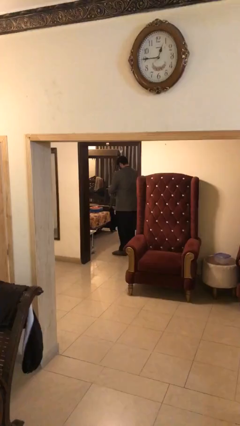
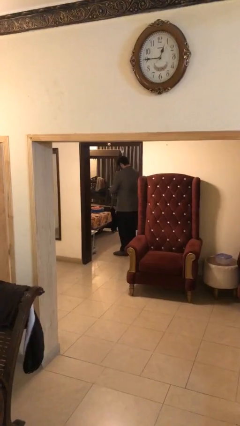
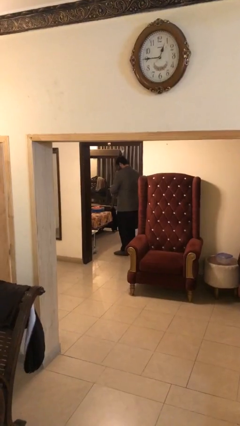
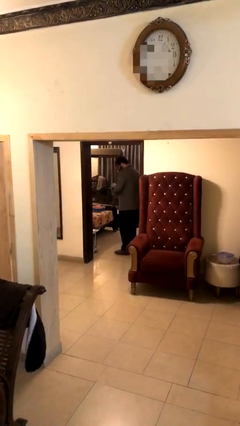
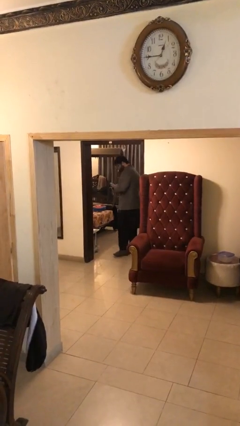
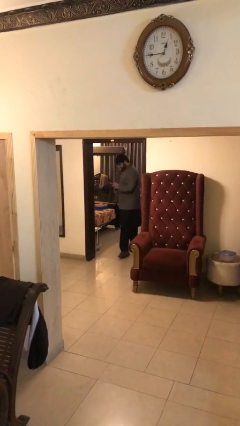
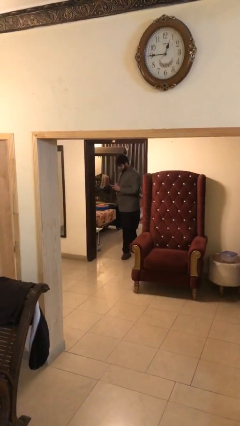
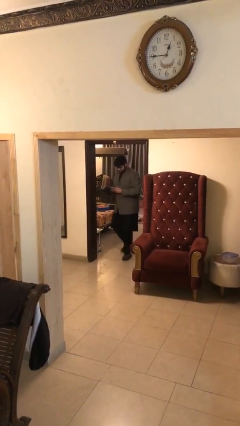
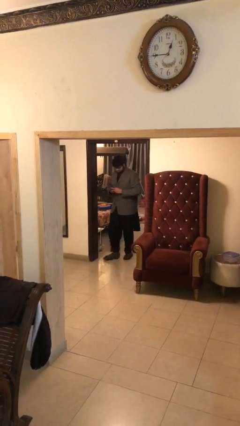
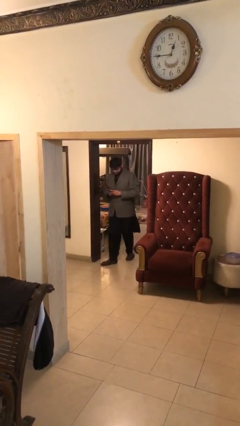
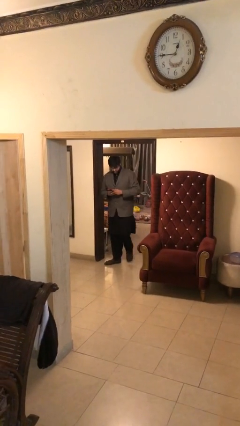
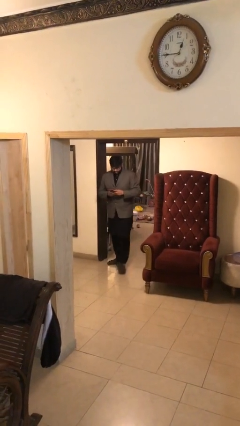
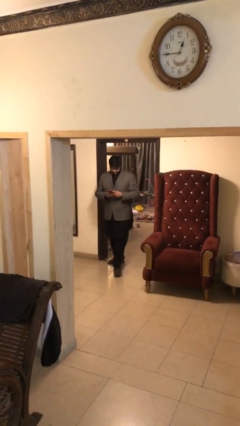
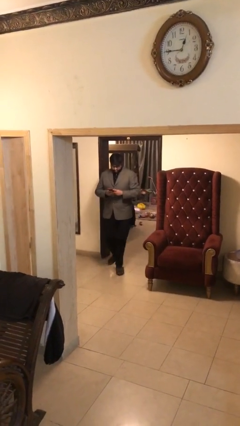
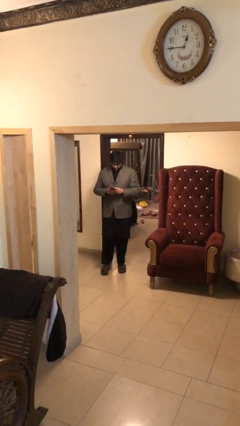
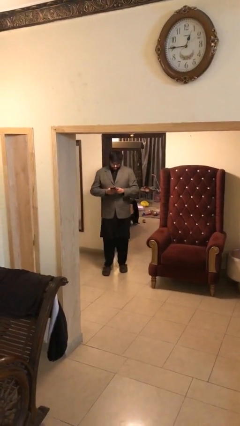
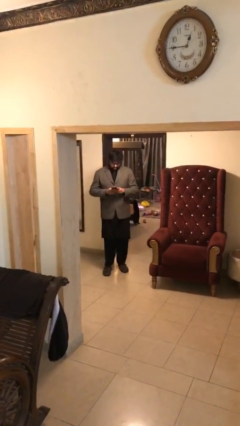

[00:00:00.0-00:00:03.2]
person enters scene through structure

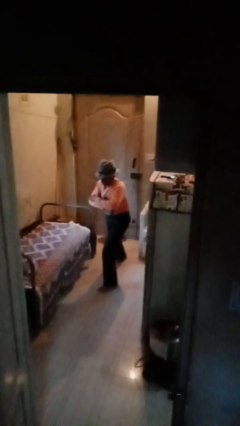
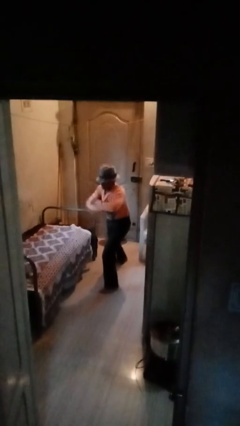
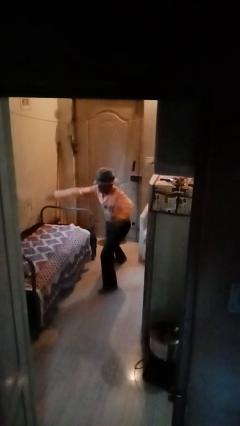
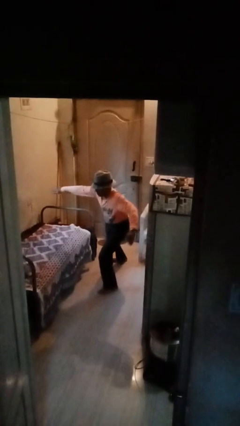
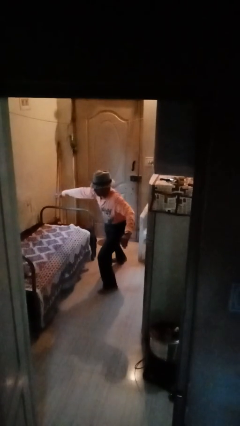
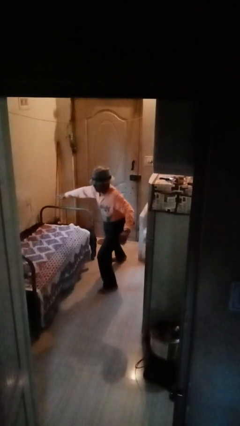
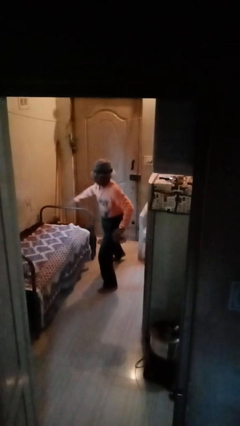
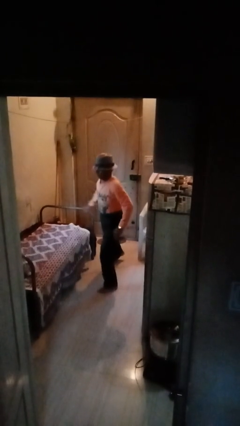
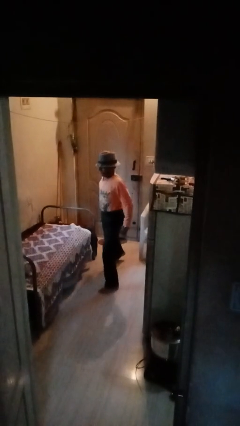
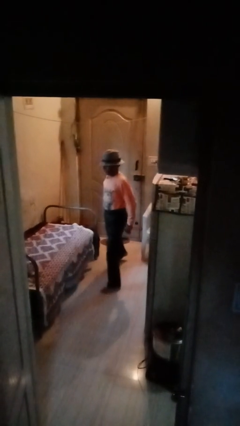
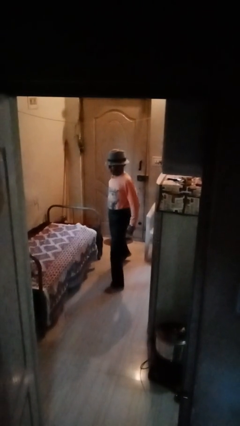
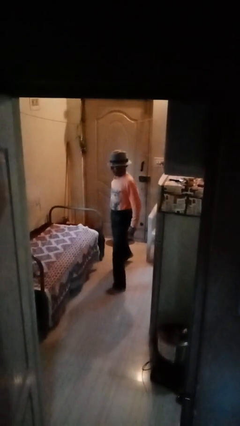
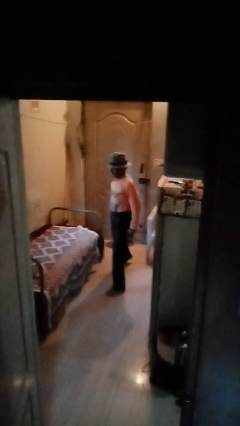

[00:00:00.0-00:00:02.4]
person karate chop

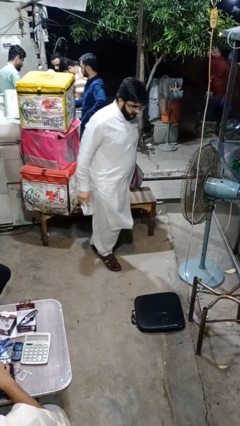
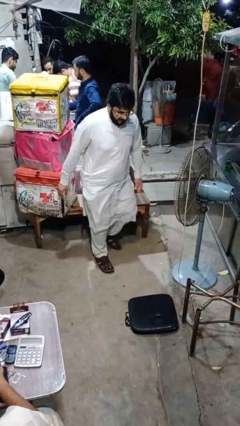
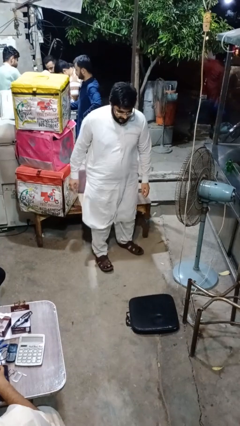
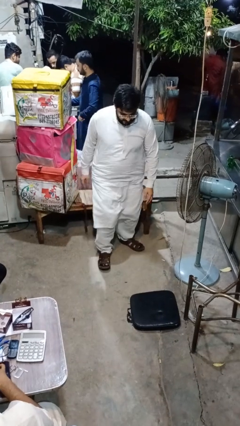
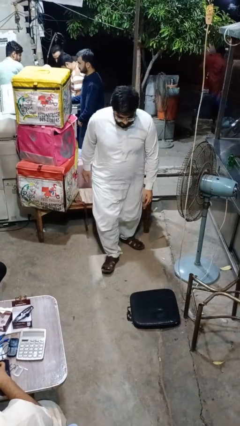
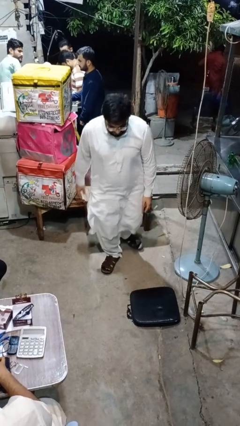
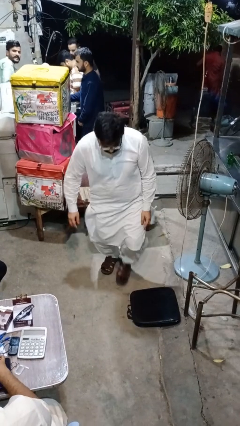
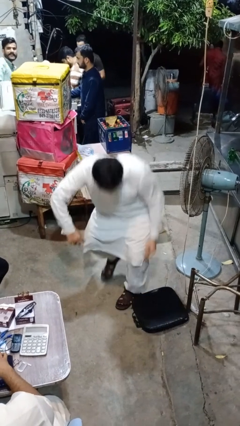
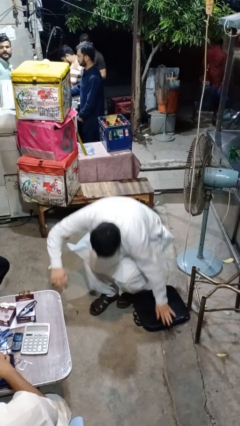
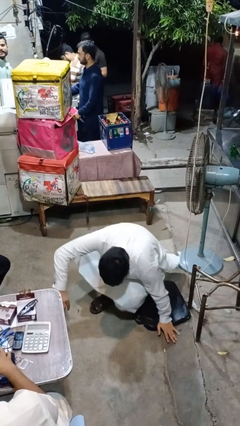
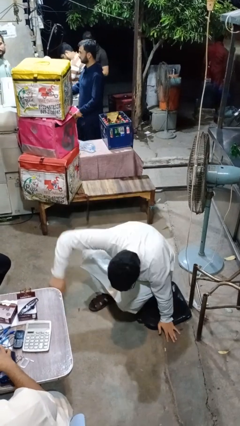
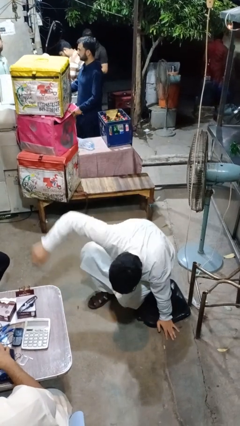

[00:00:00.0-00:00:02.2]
person trips on object on floor

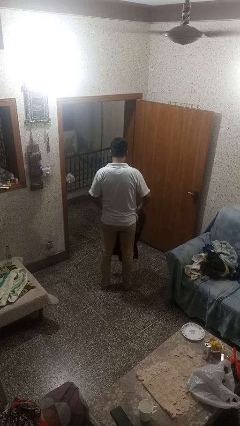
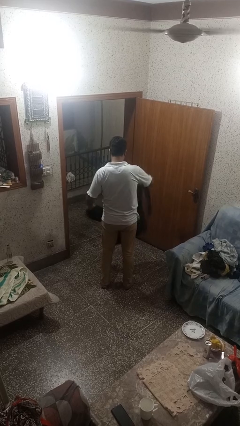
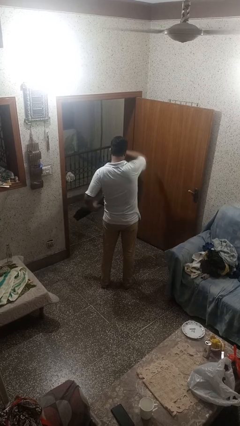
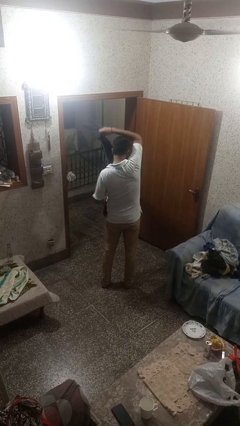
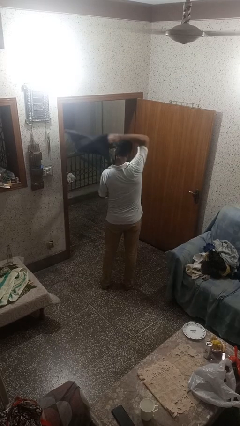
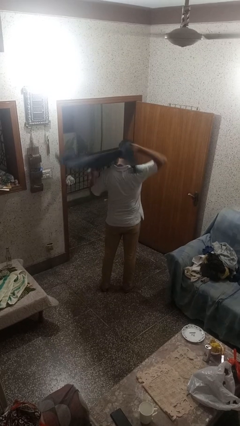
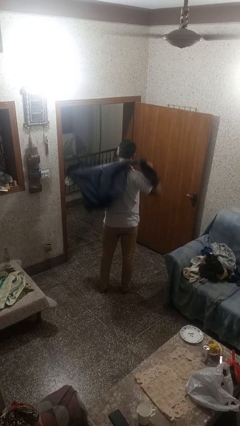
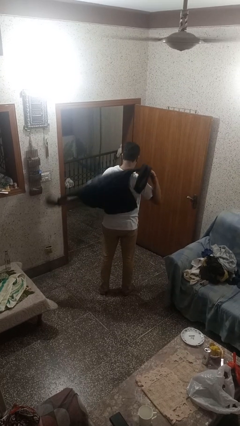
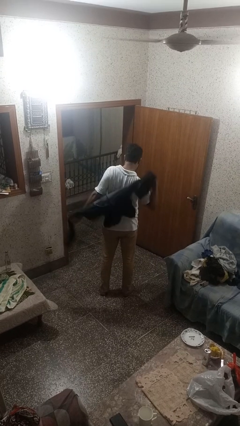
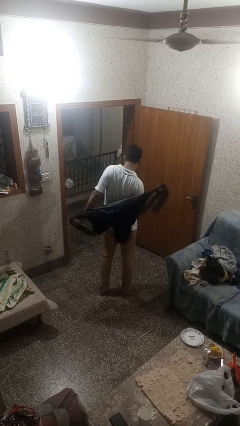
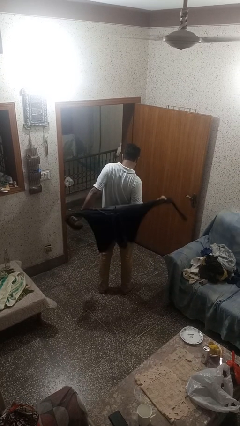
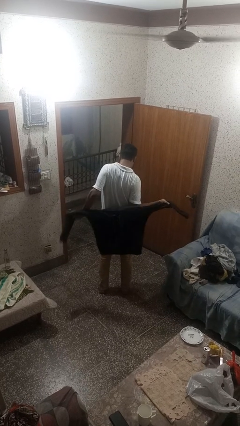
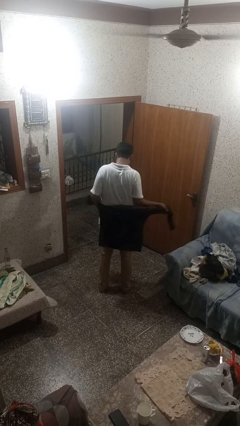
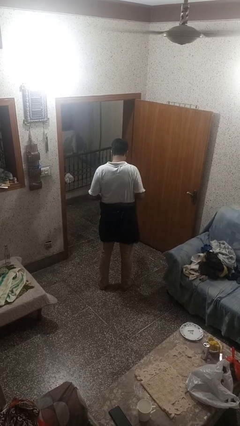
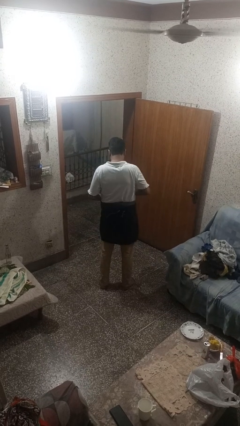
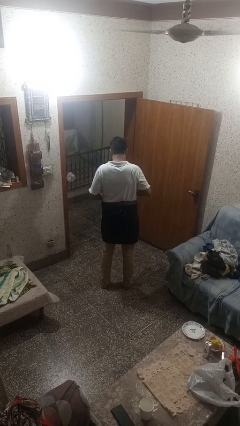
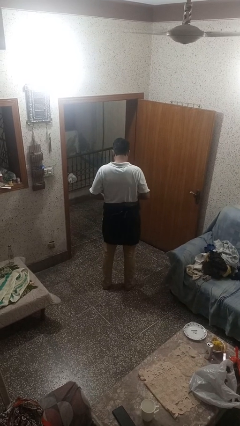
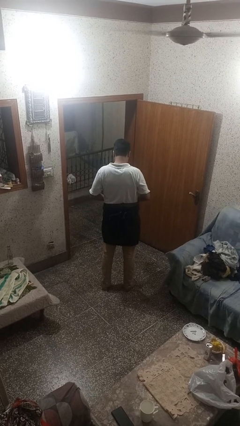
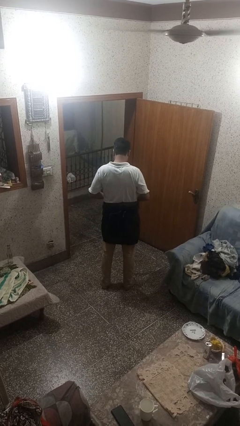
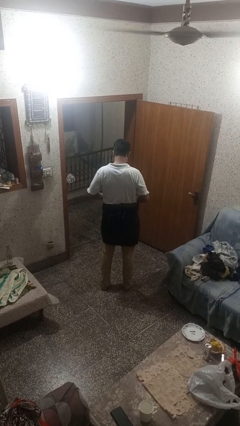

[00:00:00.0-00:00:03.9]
person ties jacket around waist

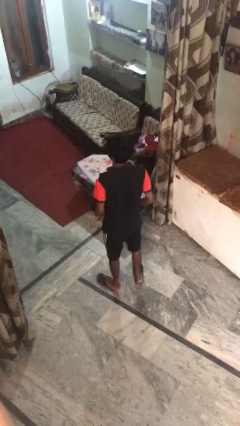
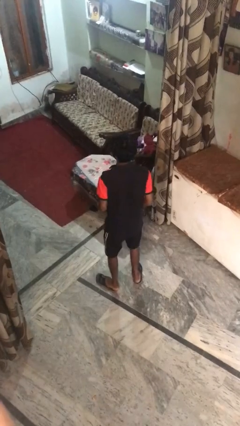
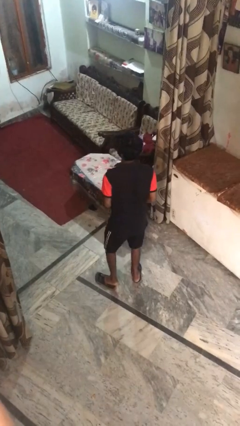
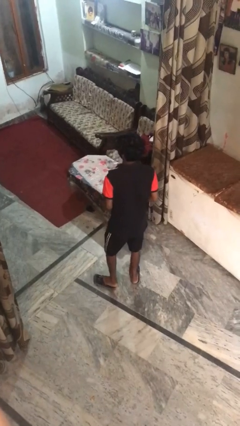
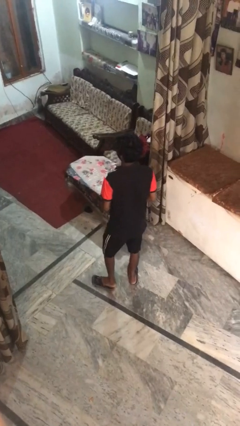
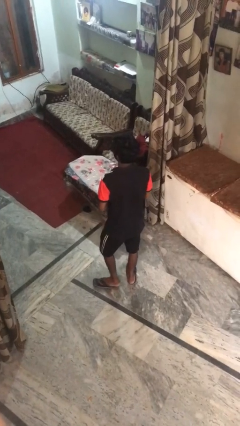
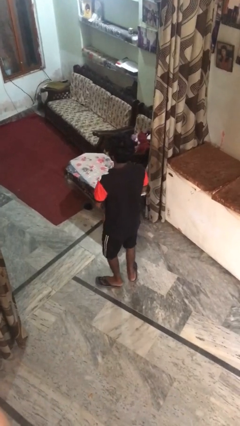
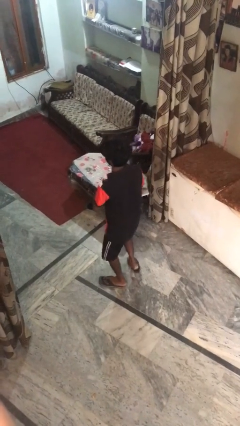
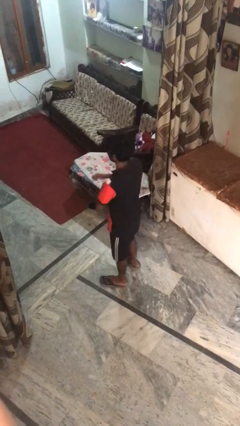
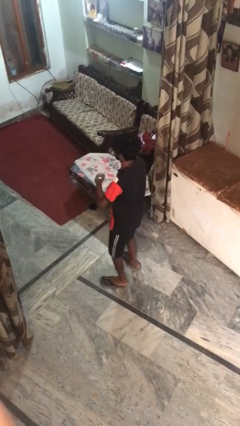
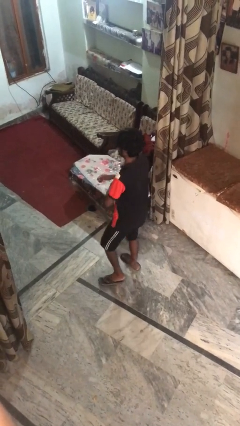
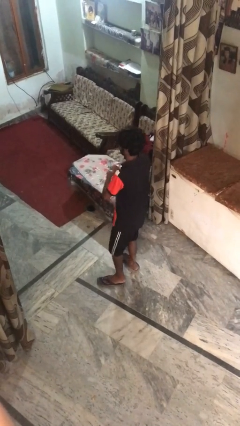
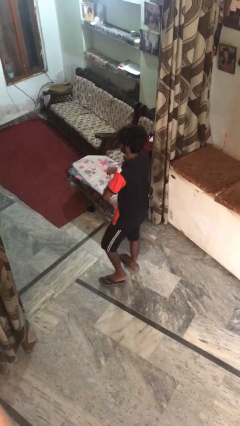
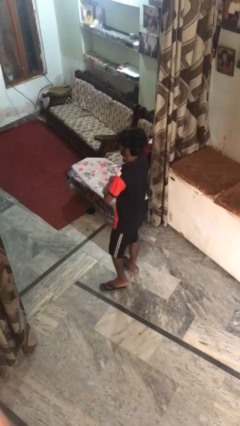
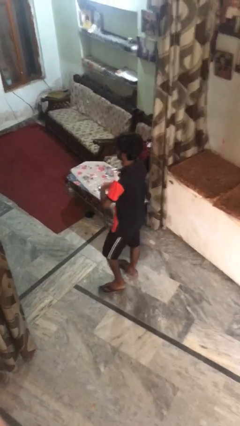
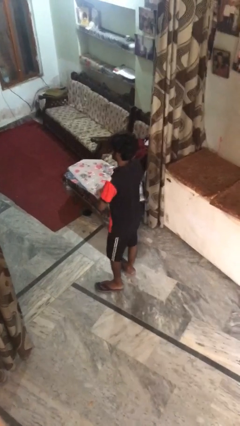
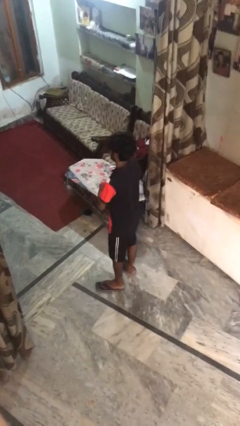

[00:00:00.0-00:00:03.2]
person dances in place

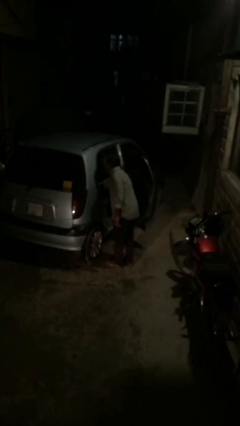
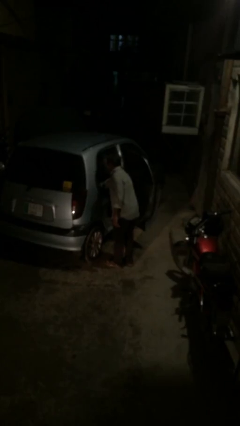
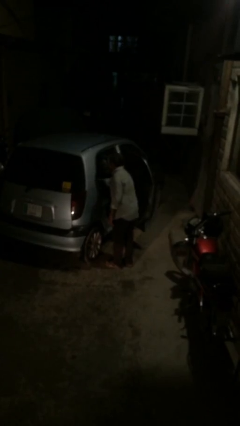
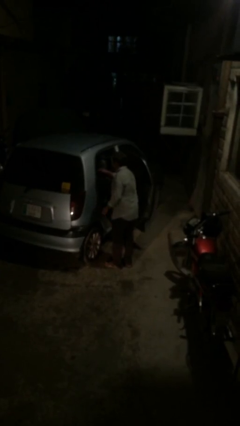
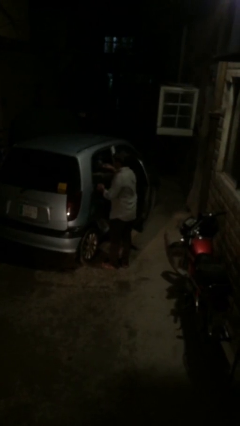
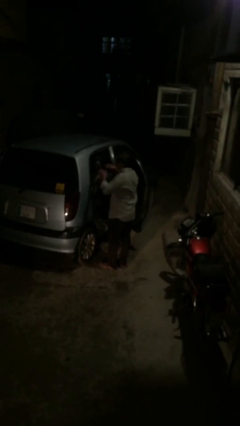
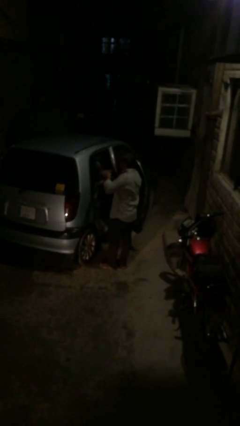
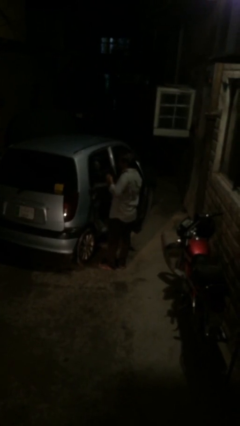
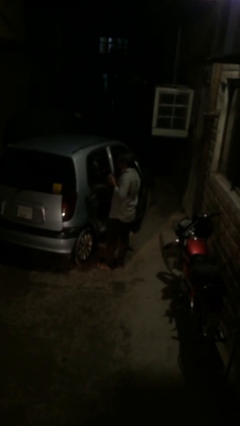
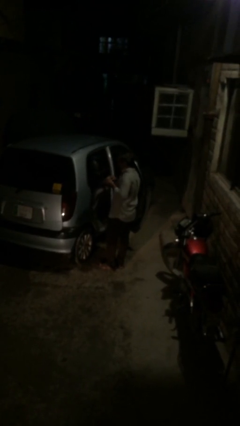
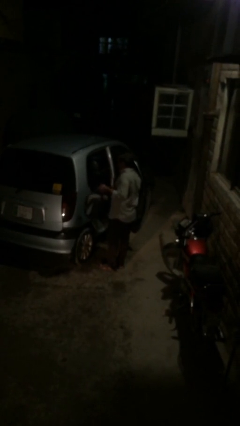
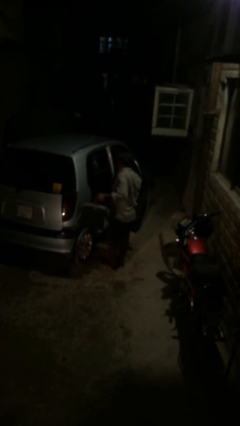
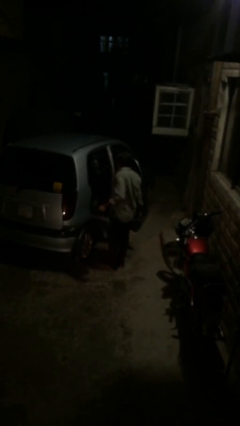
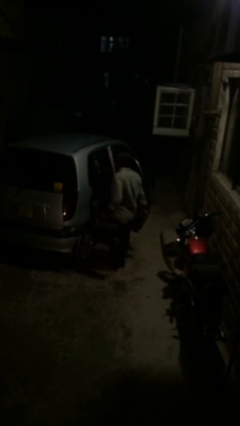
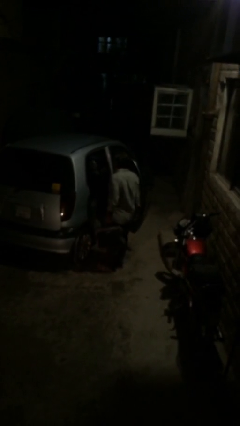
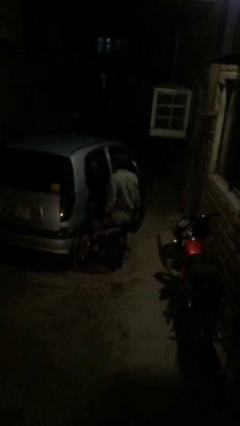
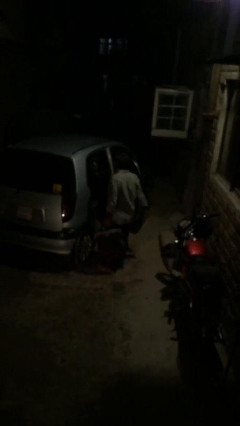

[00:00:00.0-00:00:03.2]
person unloads car
